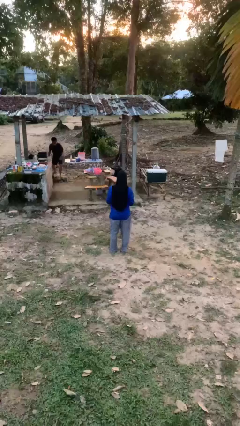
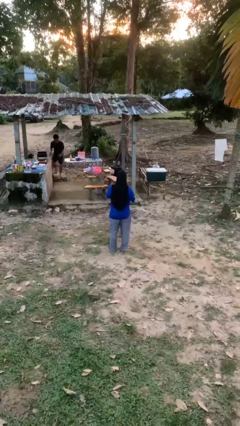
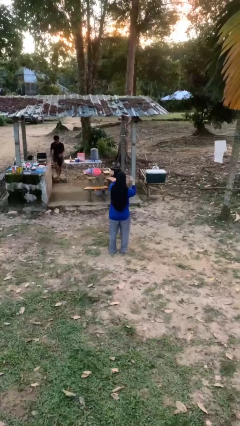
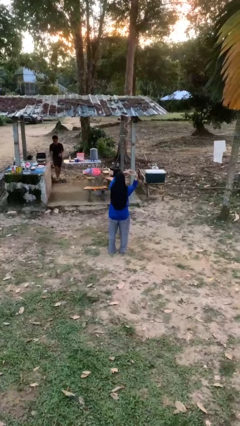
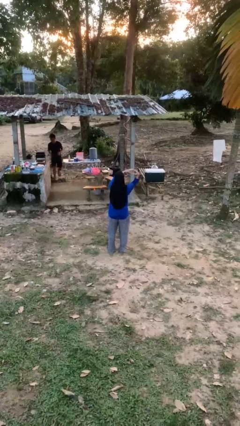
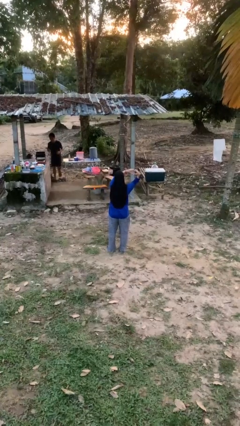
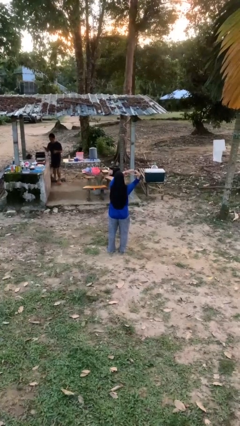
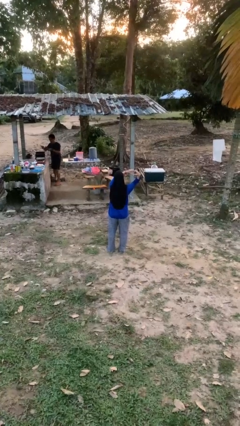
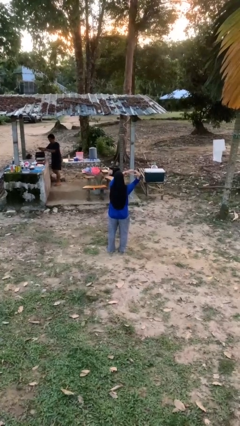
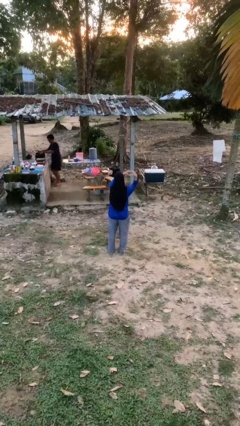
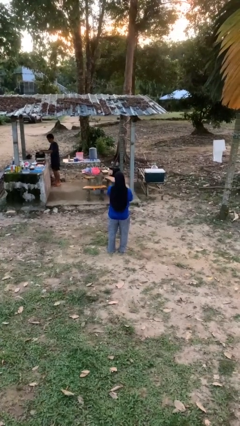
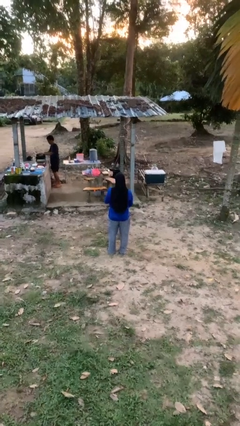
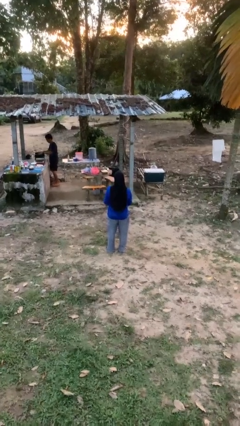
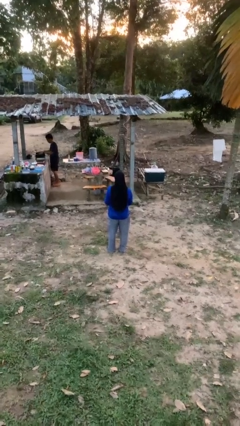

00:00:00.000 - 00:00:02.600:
person gestures heart

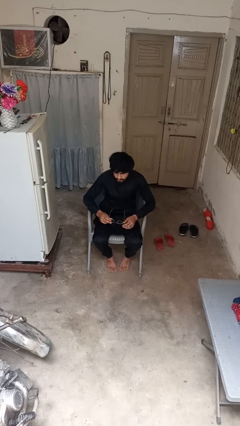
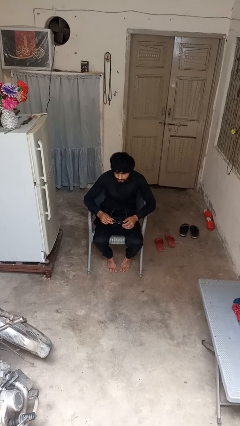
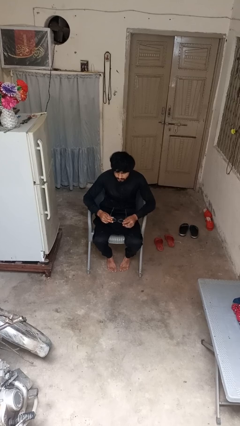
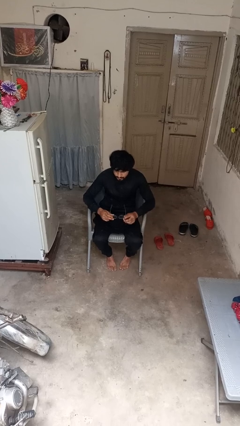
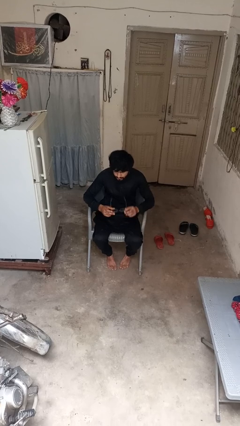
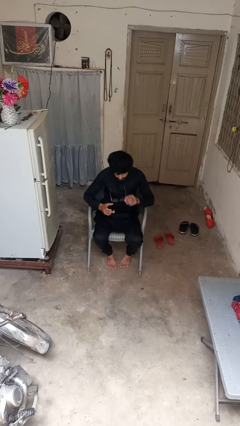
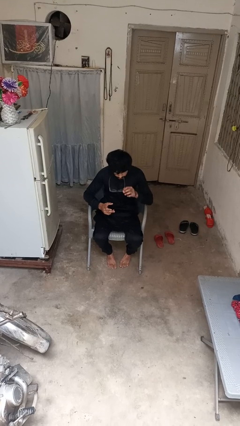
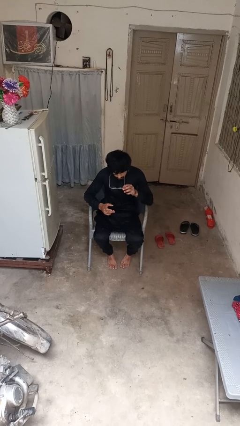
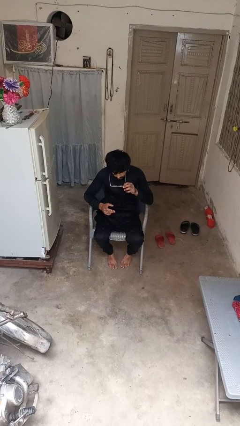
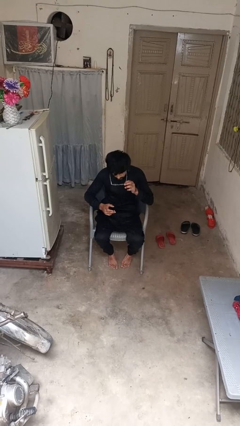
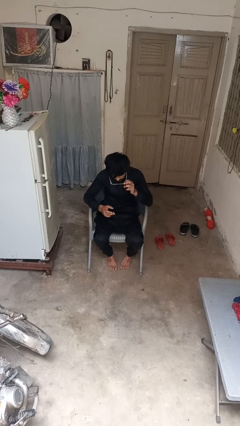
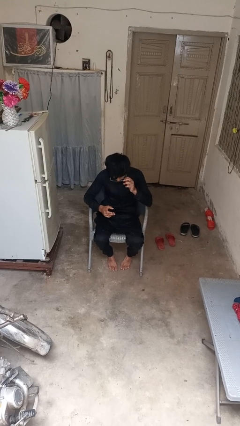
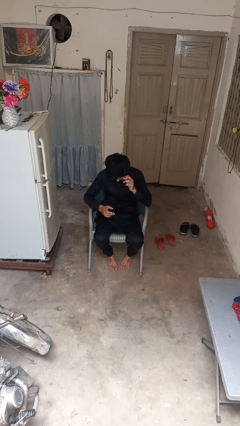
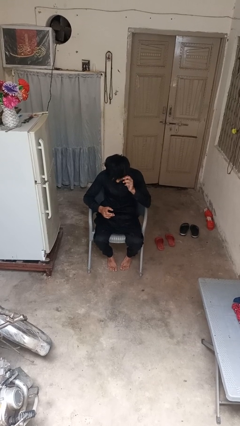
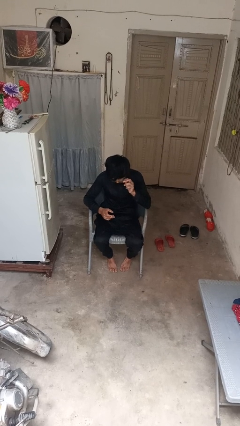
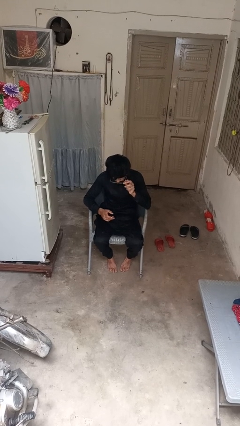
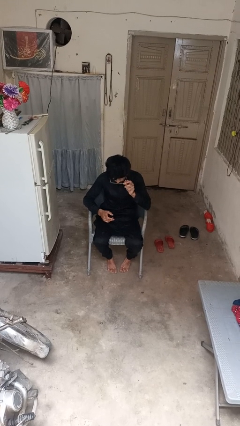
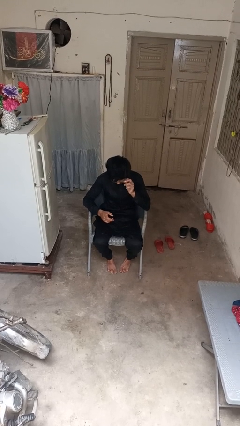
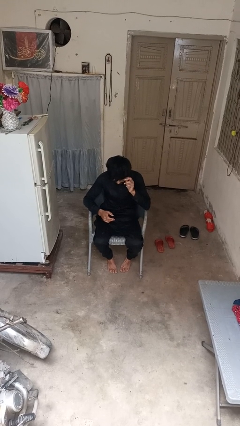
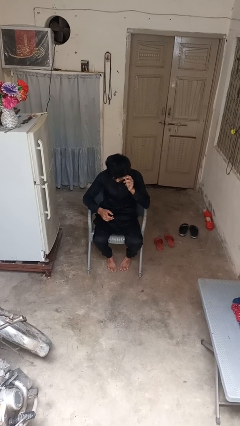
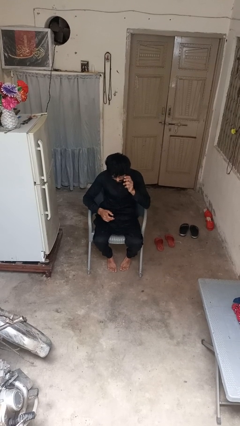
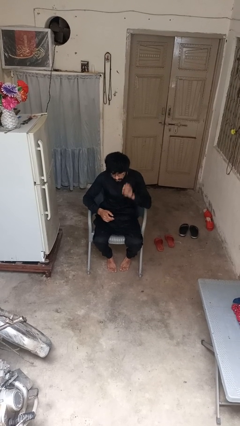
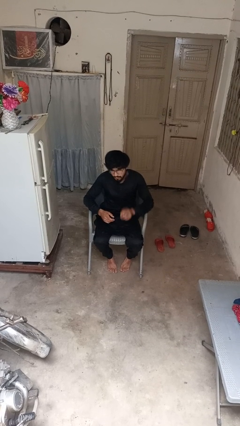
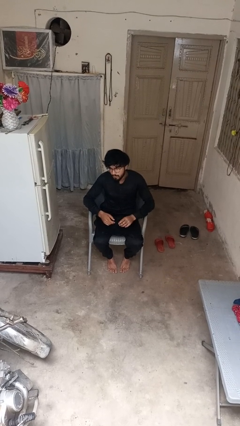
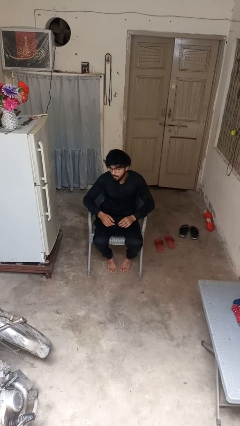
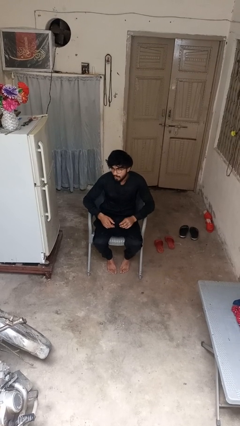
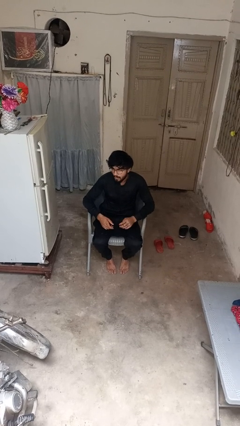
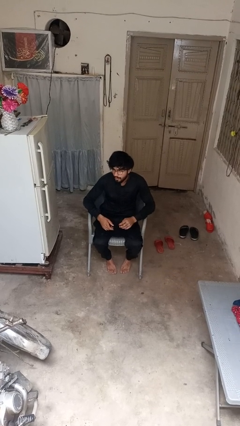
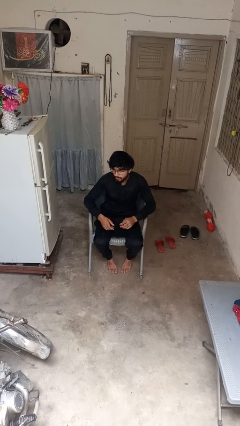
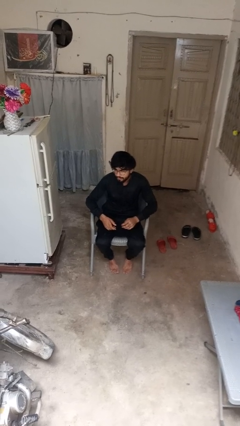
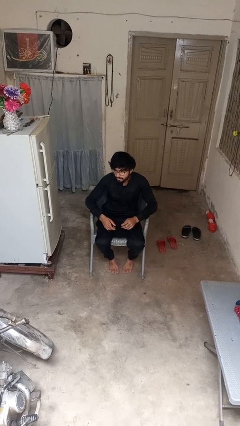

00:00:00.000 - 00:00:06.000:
person puts on glasses

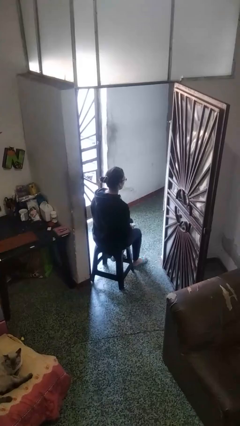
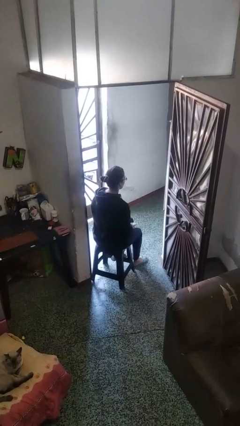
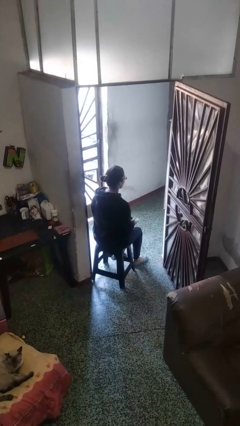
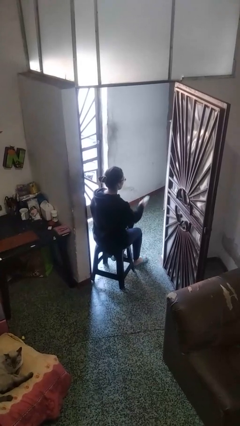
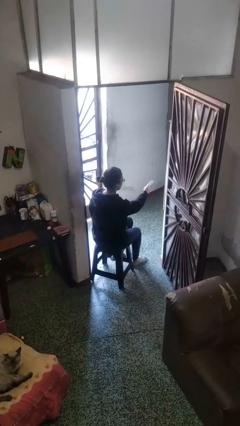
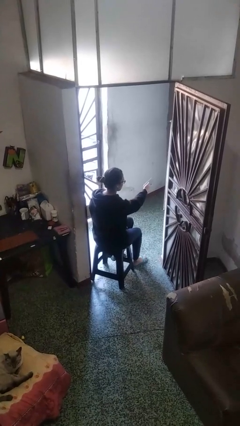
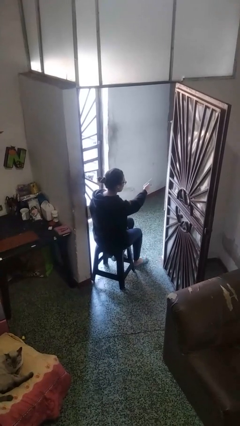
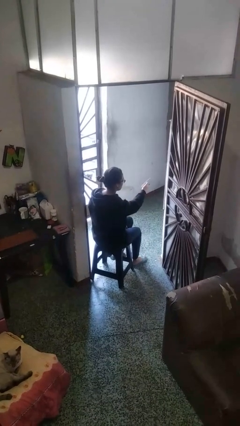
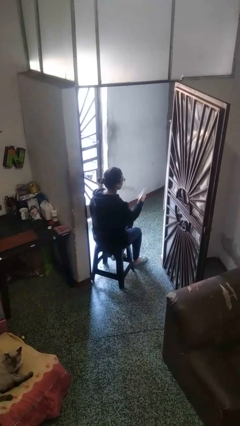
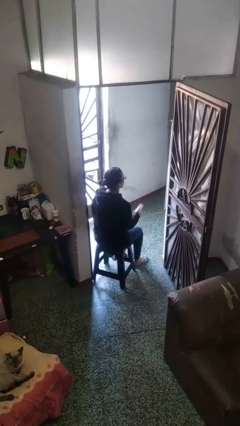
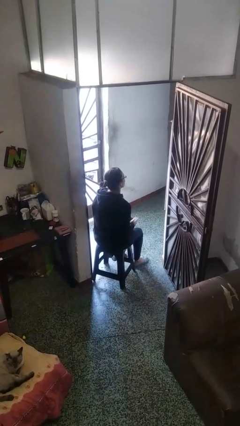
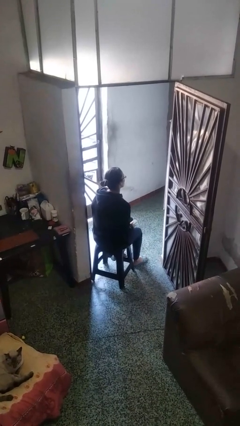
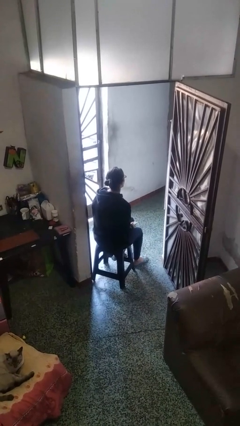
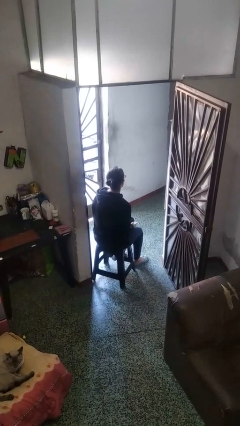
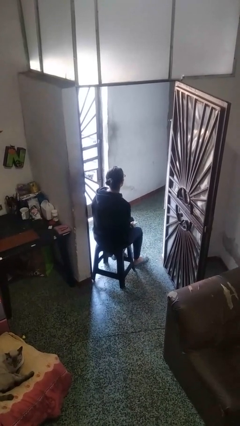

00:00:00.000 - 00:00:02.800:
person uses television remote

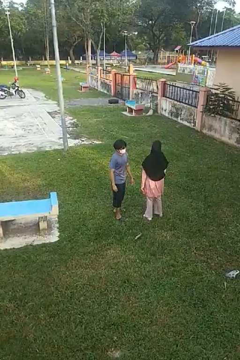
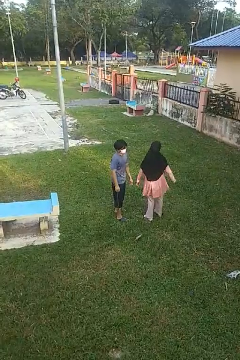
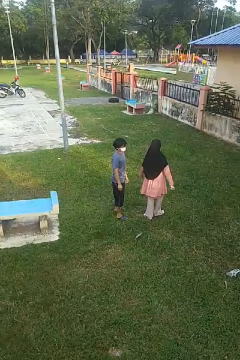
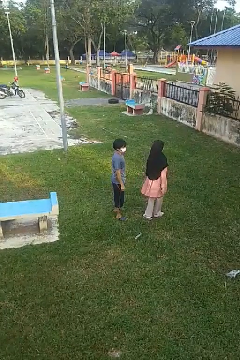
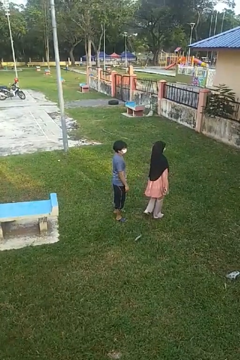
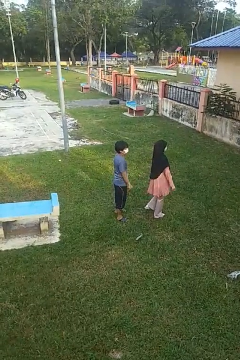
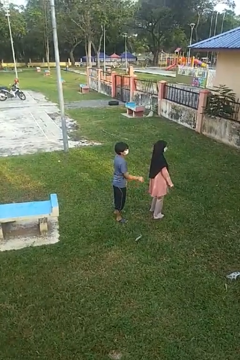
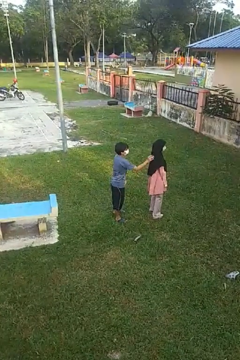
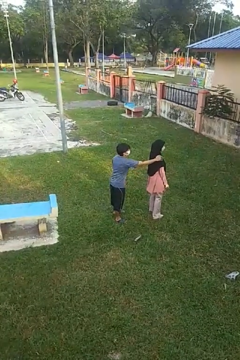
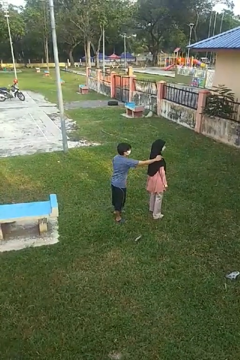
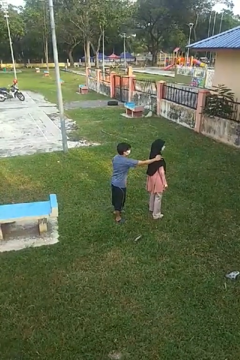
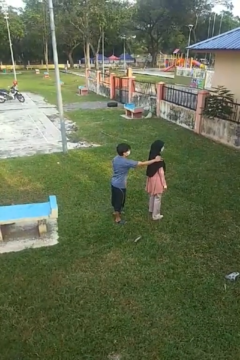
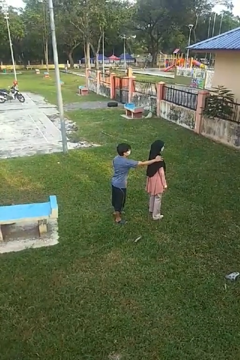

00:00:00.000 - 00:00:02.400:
person grabs person by shoulder

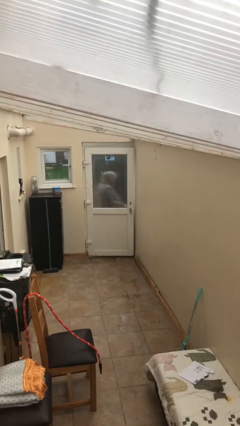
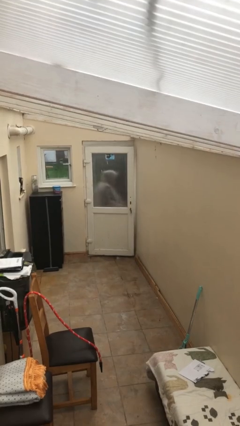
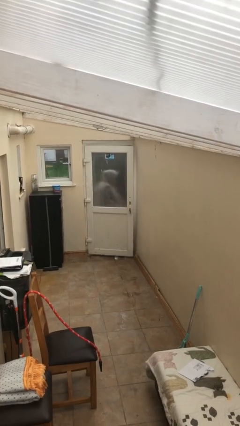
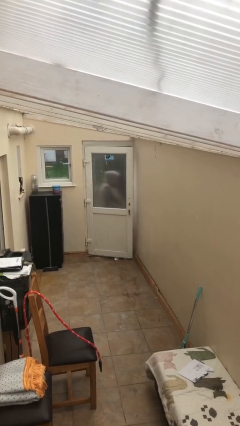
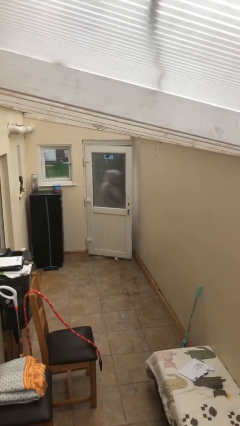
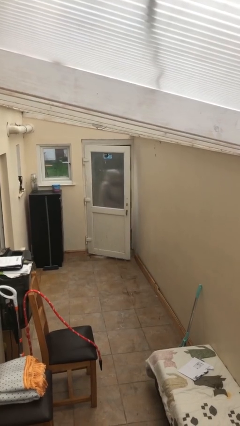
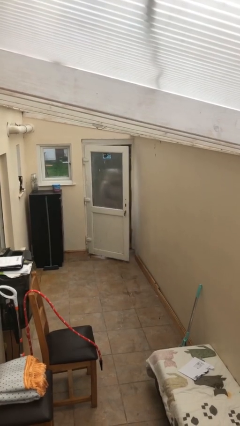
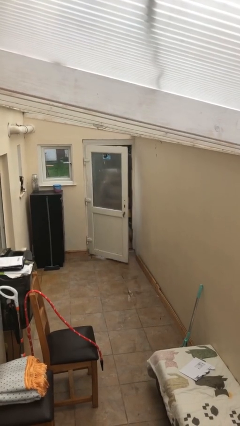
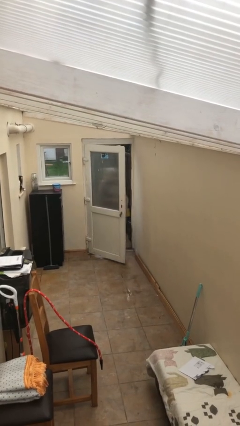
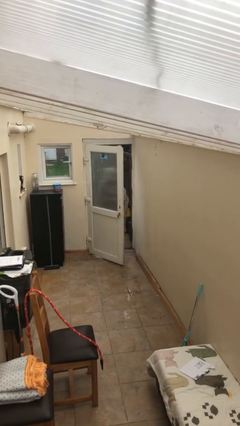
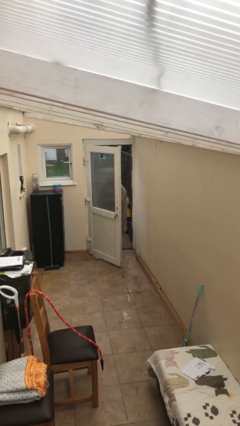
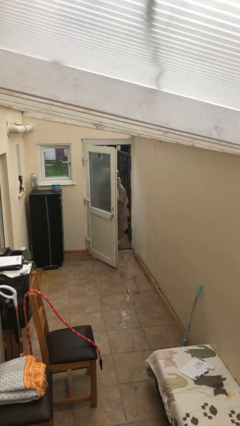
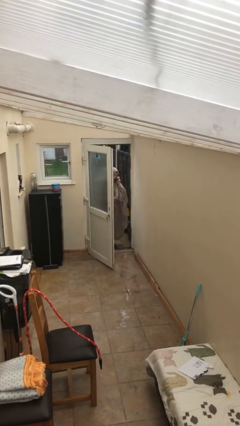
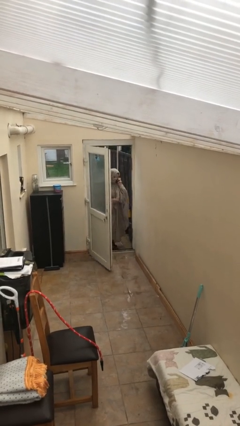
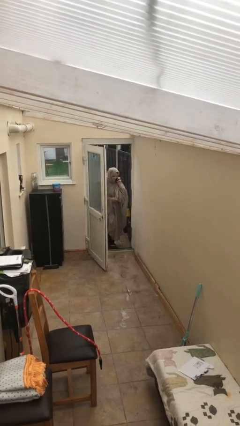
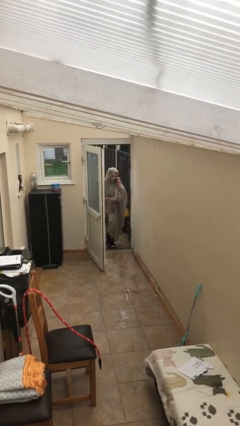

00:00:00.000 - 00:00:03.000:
person opens facility door

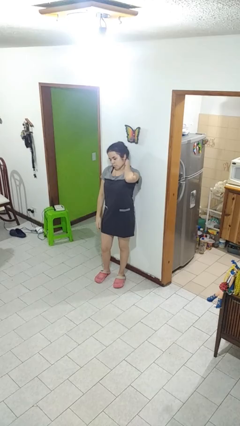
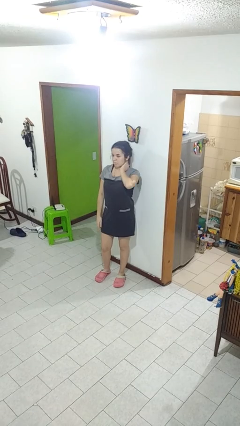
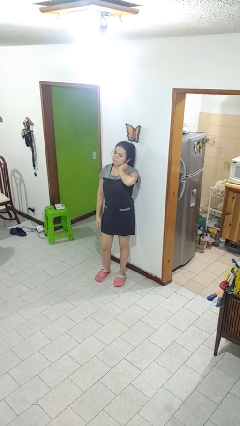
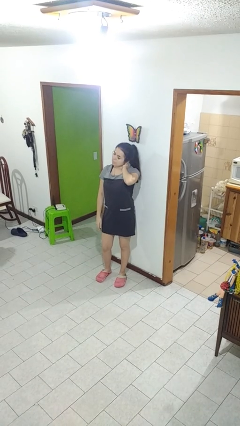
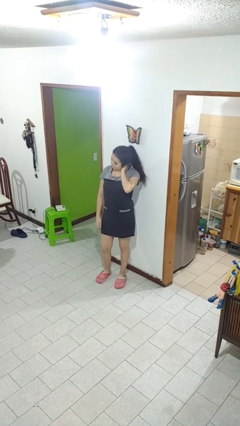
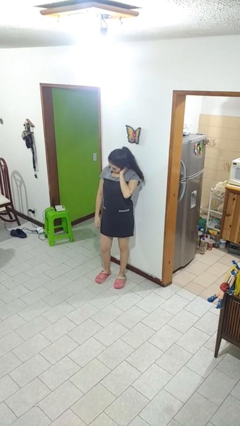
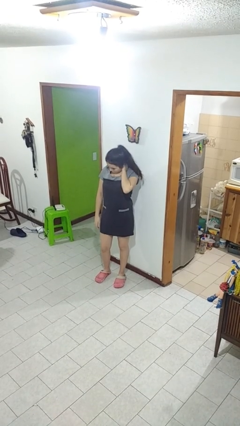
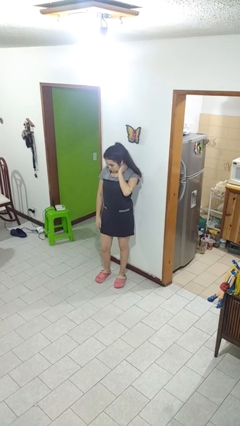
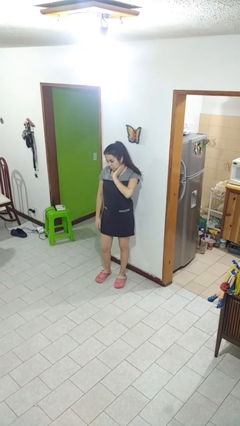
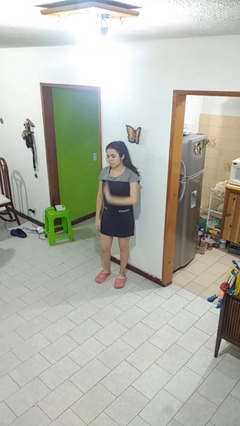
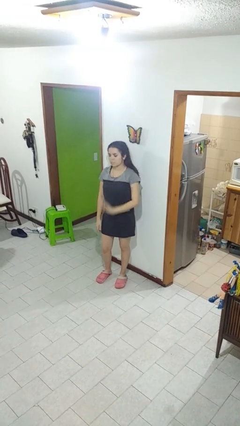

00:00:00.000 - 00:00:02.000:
person rubs neck
